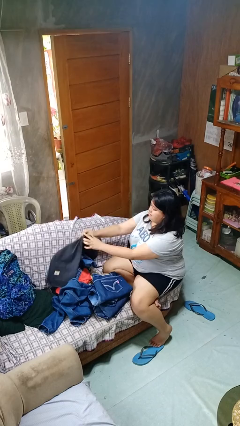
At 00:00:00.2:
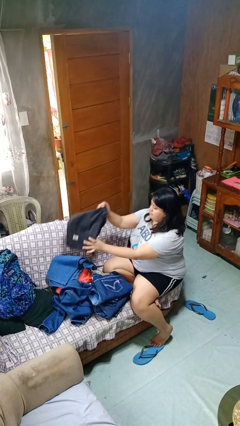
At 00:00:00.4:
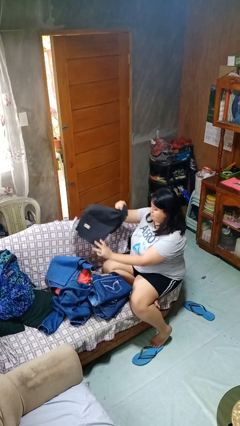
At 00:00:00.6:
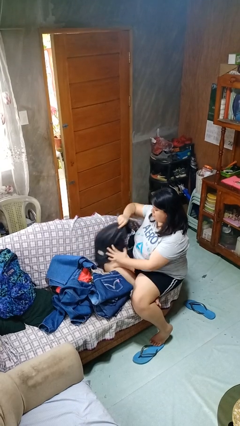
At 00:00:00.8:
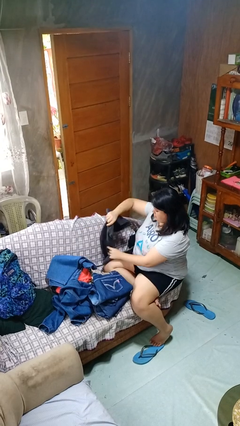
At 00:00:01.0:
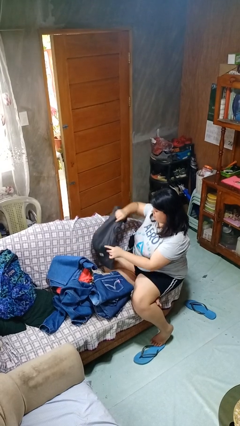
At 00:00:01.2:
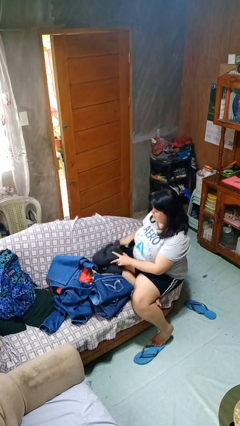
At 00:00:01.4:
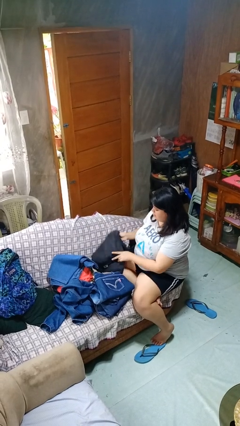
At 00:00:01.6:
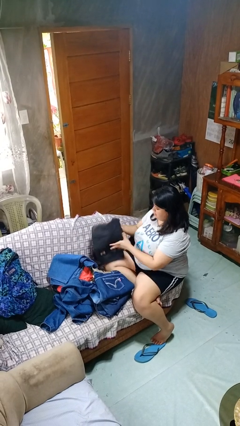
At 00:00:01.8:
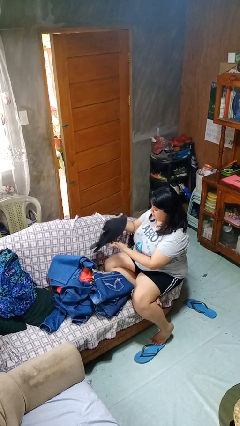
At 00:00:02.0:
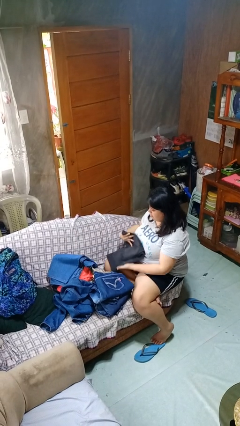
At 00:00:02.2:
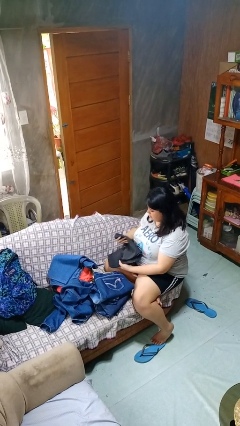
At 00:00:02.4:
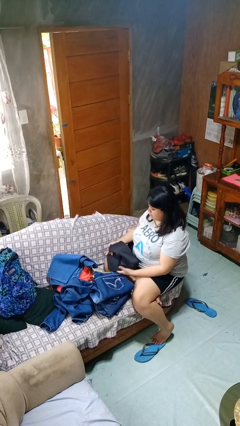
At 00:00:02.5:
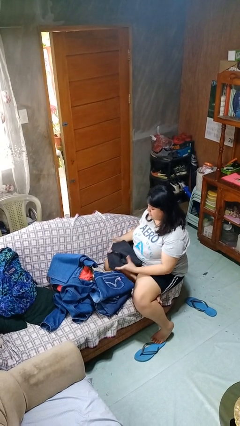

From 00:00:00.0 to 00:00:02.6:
person folds pants

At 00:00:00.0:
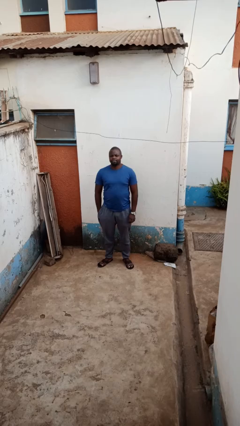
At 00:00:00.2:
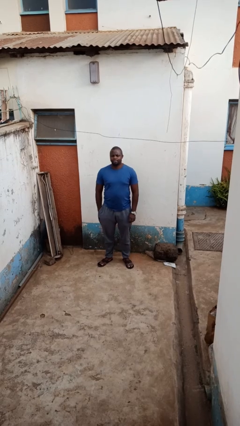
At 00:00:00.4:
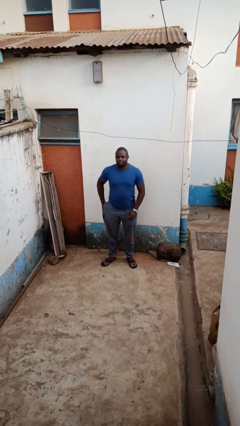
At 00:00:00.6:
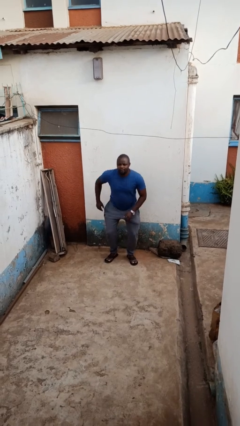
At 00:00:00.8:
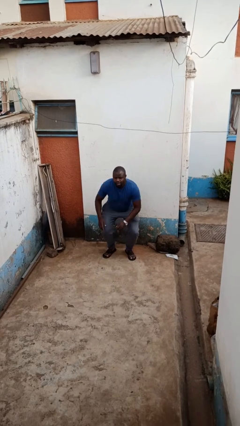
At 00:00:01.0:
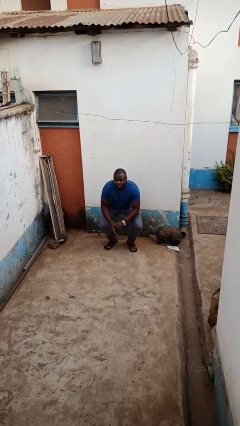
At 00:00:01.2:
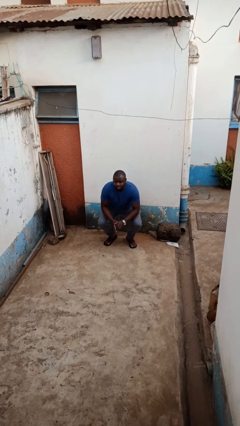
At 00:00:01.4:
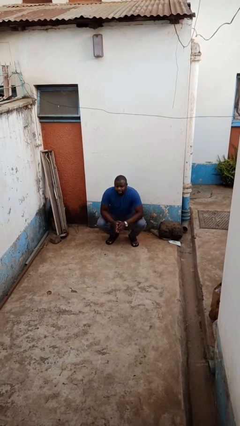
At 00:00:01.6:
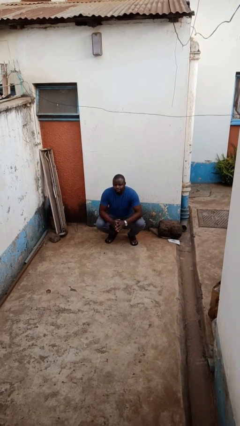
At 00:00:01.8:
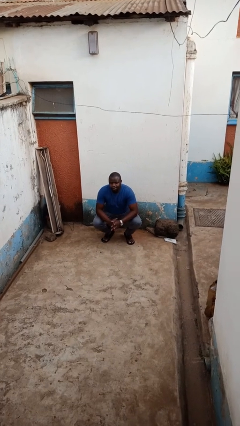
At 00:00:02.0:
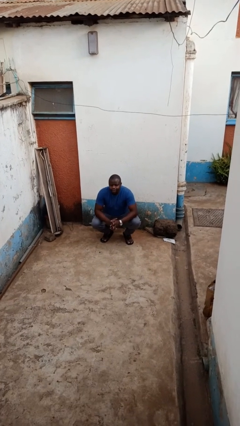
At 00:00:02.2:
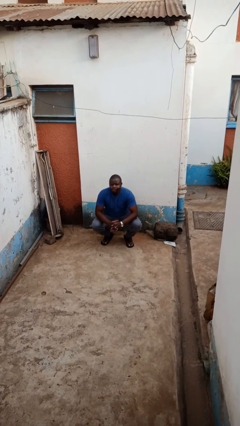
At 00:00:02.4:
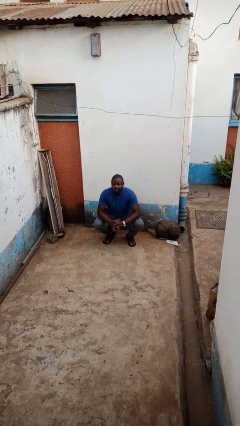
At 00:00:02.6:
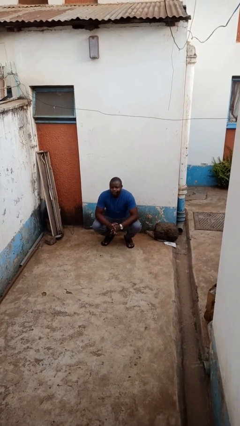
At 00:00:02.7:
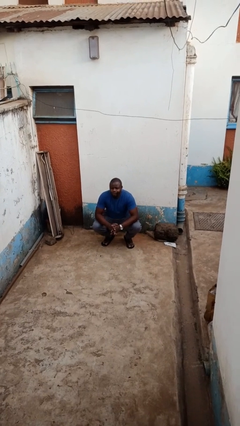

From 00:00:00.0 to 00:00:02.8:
person squats

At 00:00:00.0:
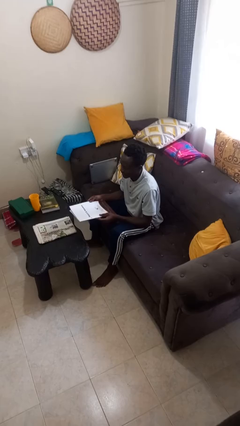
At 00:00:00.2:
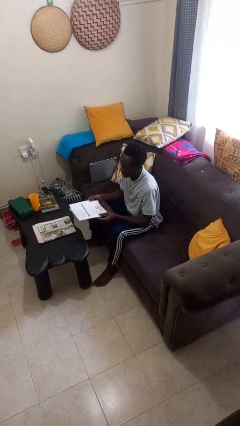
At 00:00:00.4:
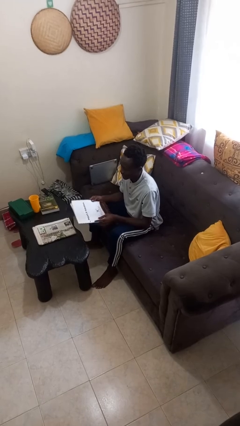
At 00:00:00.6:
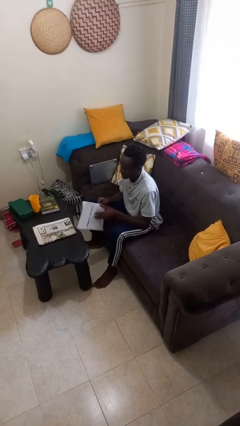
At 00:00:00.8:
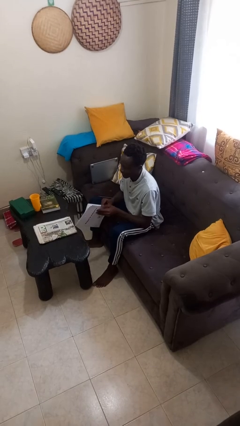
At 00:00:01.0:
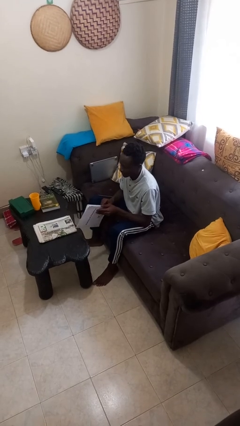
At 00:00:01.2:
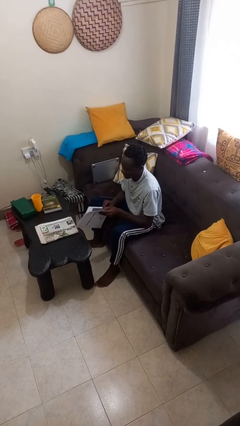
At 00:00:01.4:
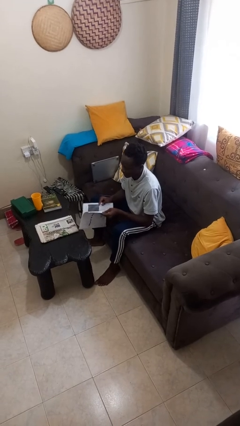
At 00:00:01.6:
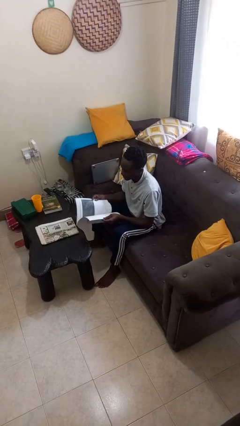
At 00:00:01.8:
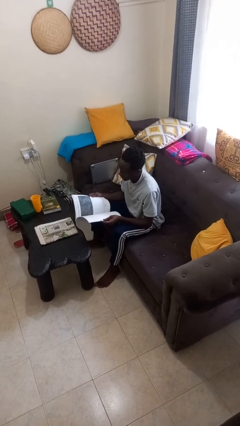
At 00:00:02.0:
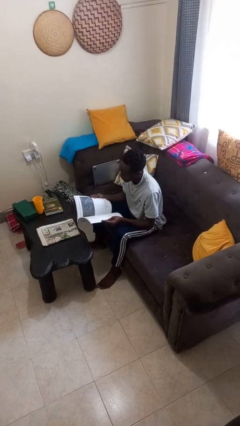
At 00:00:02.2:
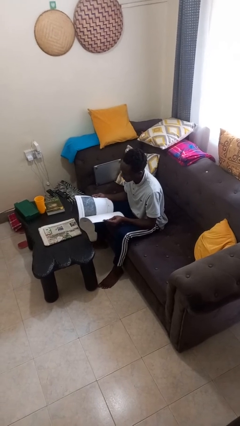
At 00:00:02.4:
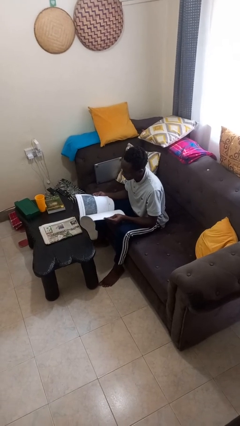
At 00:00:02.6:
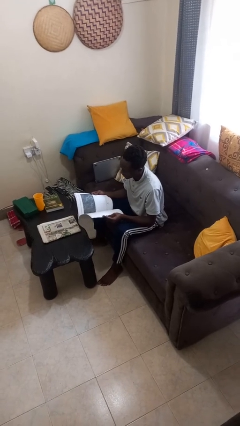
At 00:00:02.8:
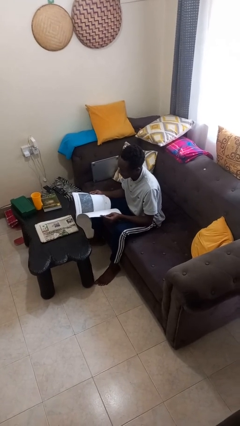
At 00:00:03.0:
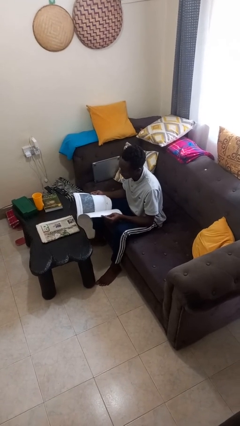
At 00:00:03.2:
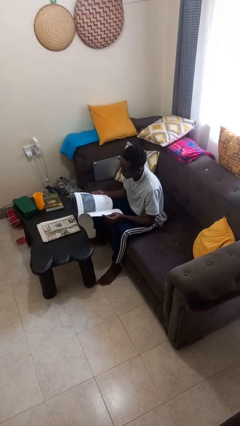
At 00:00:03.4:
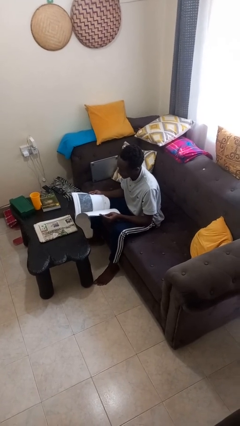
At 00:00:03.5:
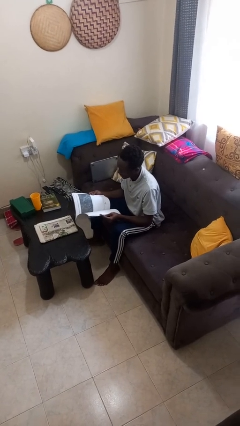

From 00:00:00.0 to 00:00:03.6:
person reads magazine

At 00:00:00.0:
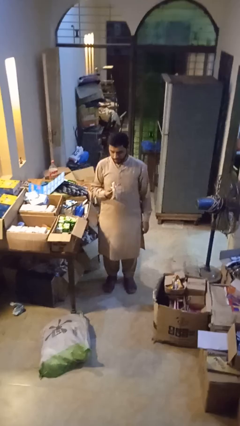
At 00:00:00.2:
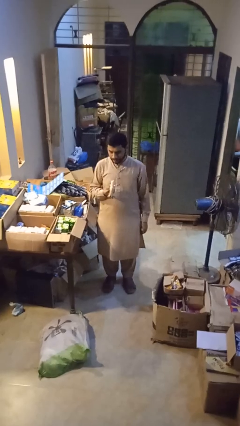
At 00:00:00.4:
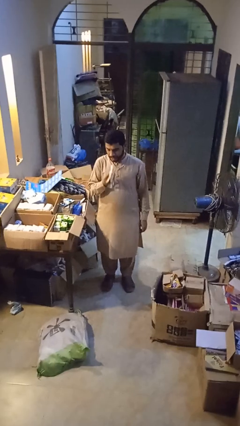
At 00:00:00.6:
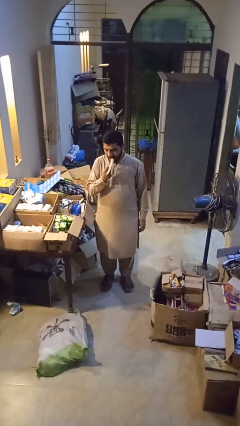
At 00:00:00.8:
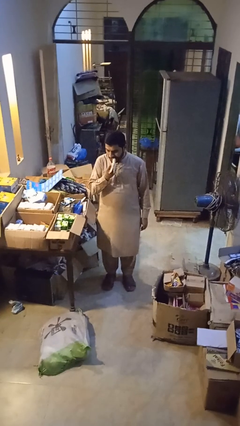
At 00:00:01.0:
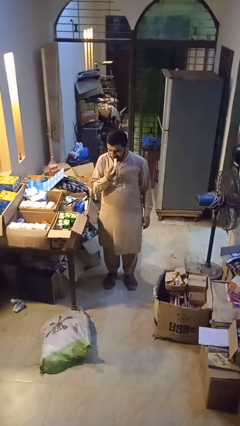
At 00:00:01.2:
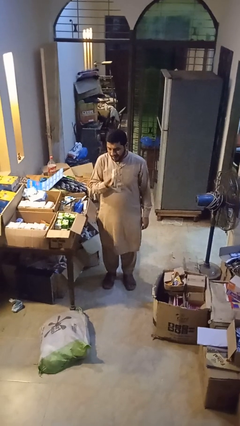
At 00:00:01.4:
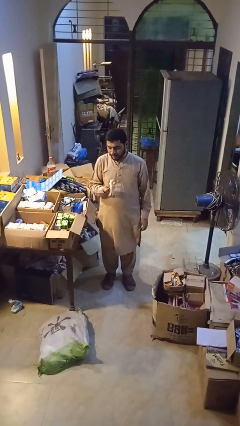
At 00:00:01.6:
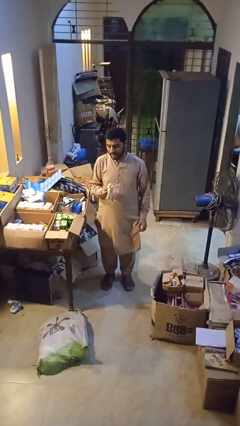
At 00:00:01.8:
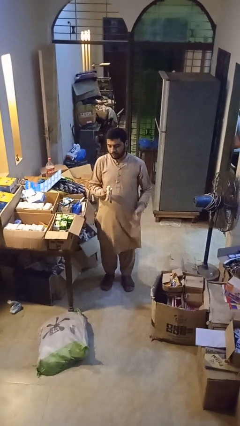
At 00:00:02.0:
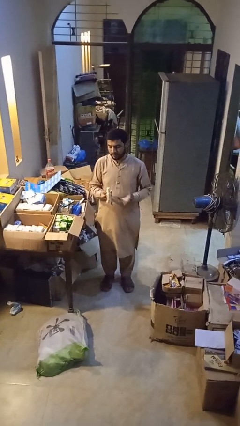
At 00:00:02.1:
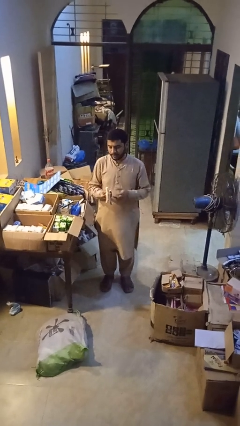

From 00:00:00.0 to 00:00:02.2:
person eats banana

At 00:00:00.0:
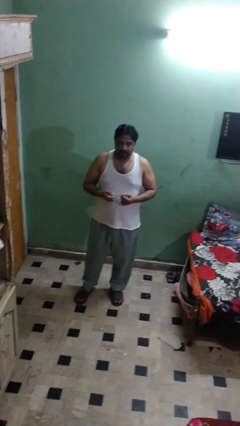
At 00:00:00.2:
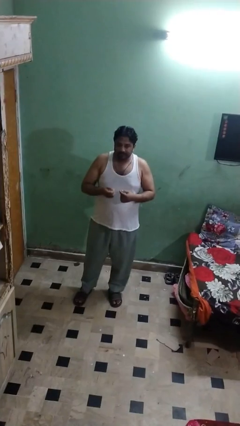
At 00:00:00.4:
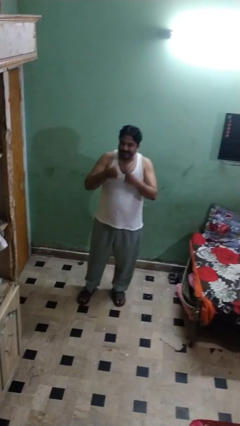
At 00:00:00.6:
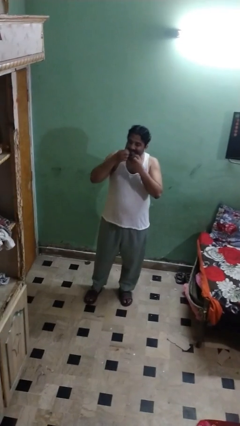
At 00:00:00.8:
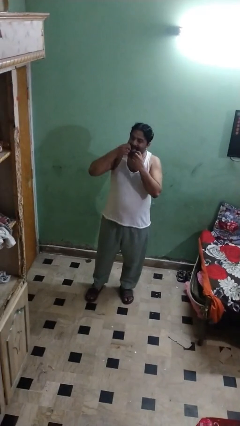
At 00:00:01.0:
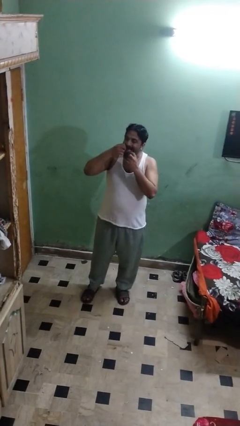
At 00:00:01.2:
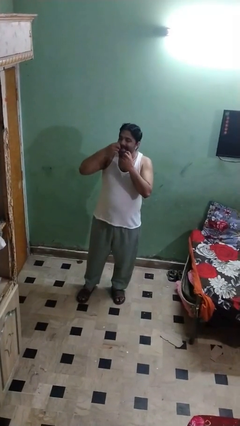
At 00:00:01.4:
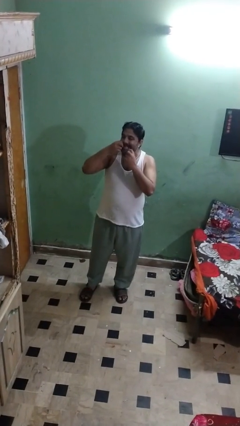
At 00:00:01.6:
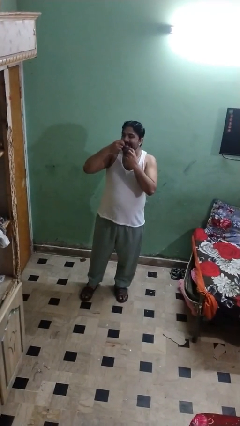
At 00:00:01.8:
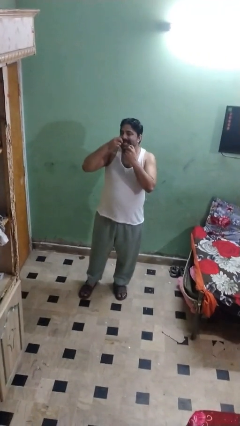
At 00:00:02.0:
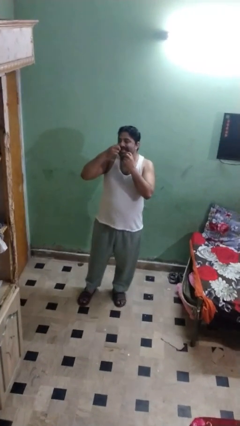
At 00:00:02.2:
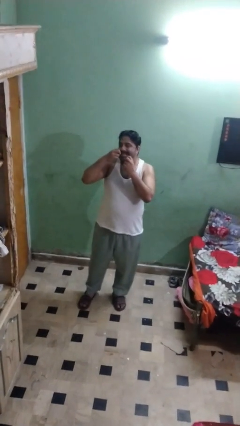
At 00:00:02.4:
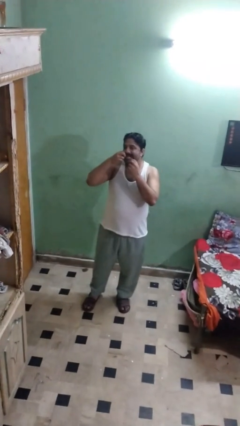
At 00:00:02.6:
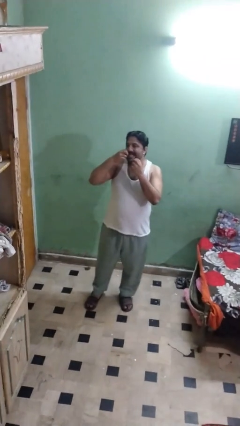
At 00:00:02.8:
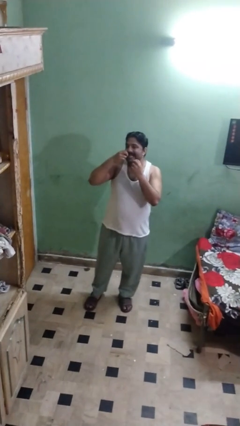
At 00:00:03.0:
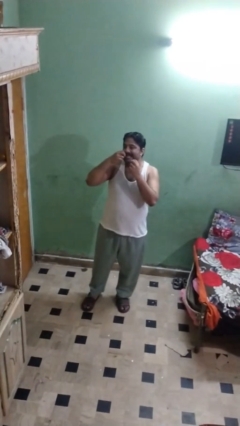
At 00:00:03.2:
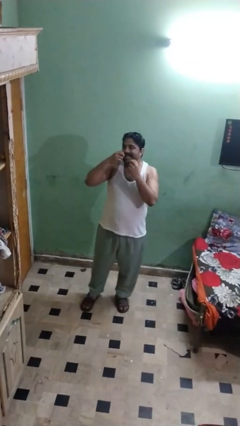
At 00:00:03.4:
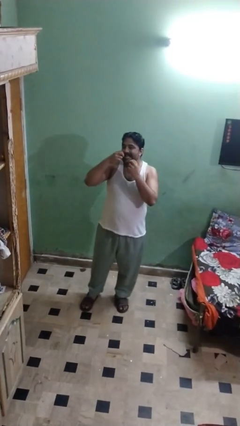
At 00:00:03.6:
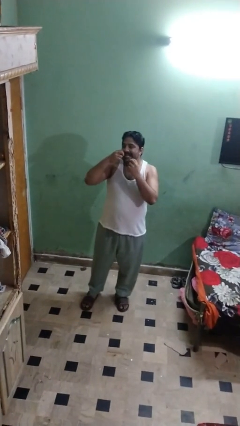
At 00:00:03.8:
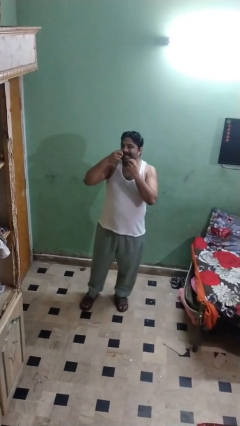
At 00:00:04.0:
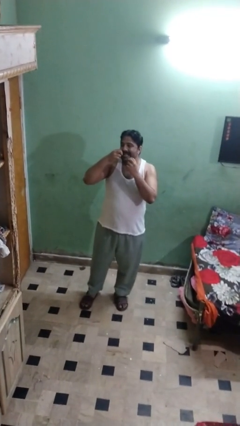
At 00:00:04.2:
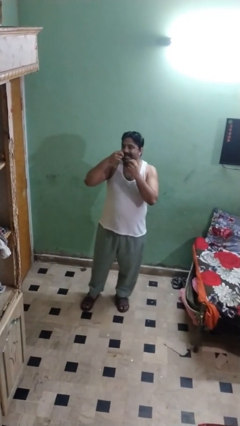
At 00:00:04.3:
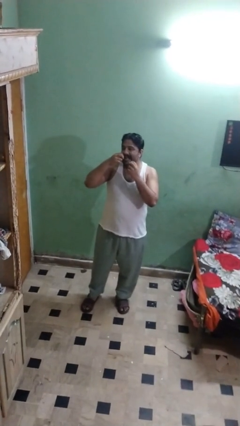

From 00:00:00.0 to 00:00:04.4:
person flosses

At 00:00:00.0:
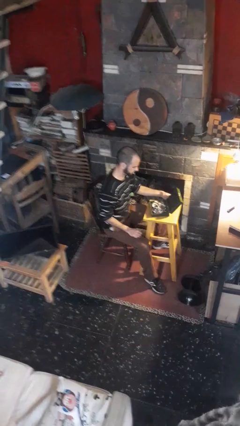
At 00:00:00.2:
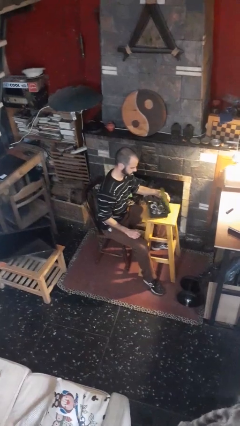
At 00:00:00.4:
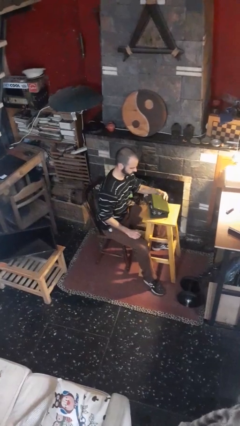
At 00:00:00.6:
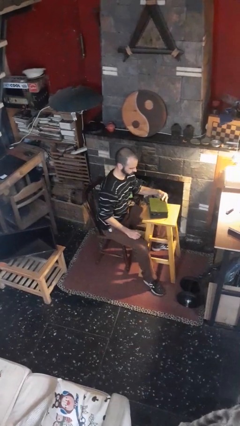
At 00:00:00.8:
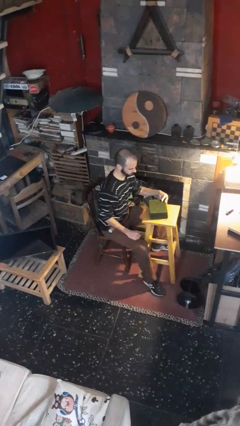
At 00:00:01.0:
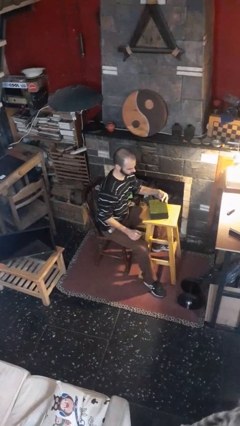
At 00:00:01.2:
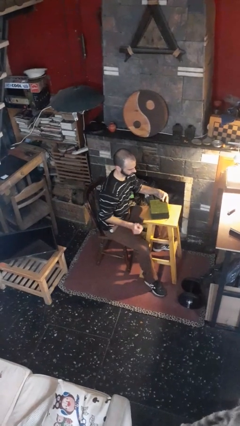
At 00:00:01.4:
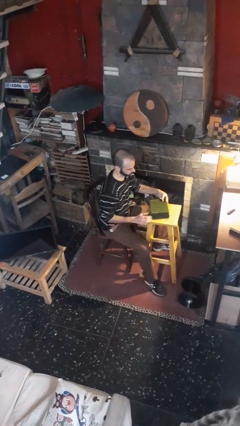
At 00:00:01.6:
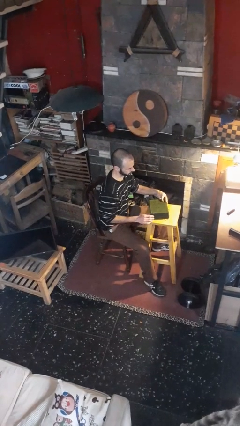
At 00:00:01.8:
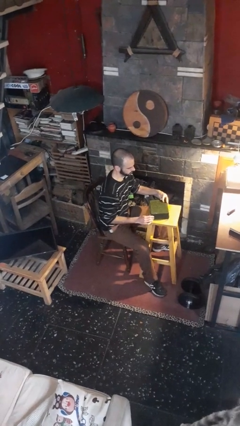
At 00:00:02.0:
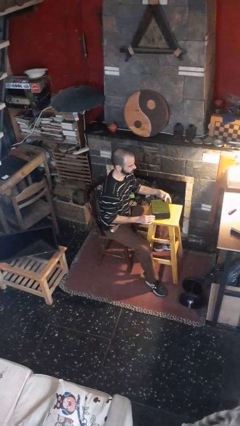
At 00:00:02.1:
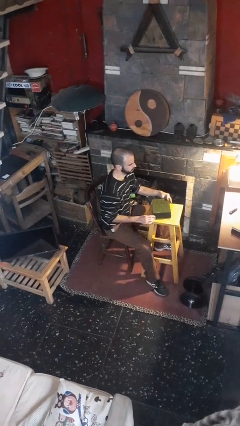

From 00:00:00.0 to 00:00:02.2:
person closes jewelry box
